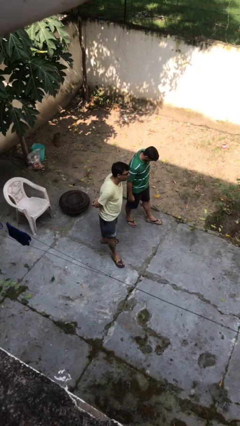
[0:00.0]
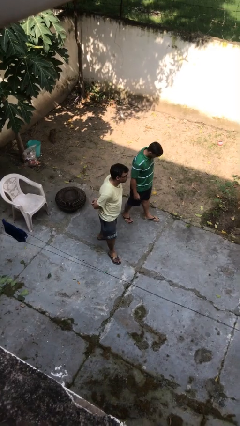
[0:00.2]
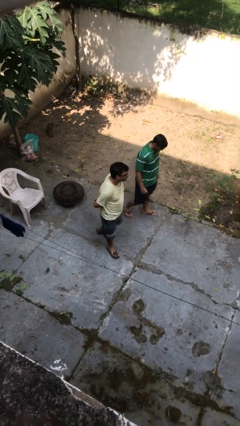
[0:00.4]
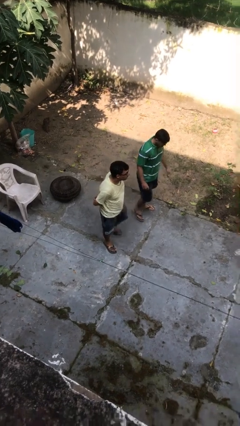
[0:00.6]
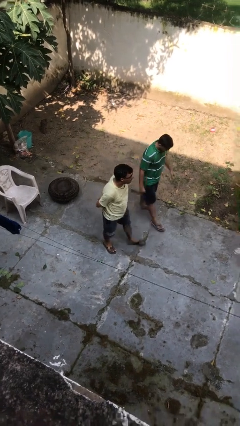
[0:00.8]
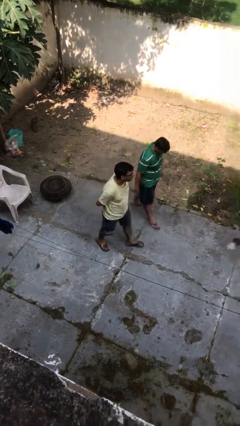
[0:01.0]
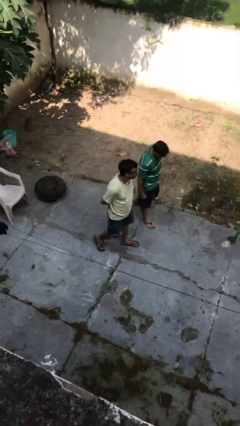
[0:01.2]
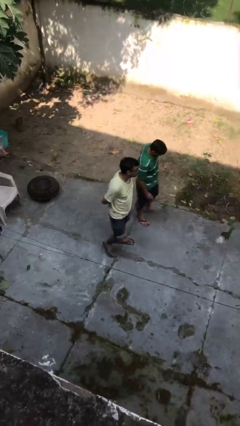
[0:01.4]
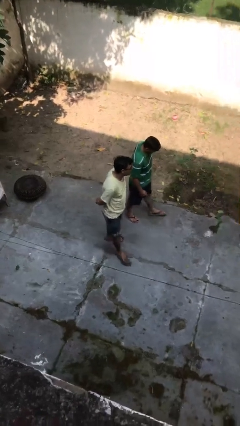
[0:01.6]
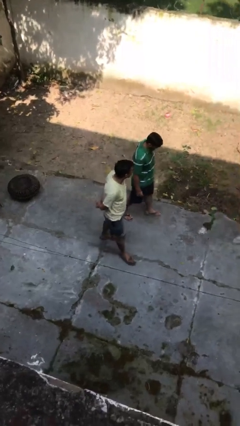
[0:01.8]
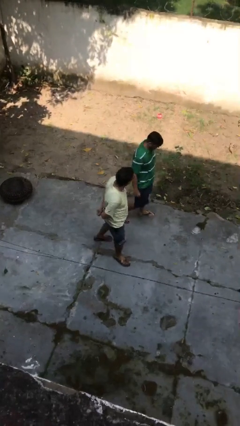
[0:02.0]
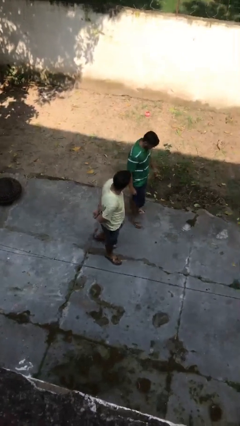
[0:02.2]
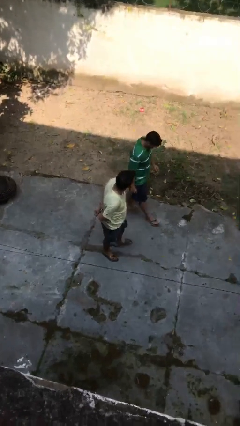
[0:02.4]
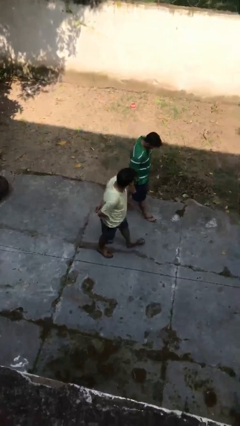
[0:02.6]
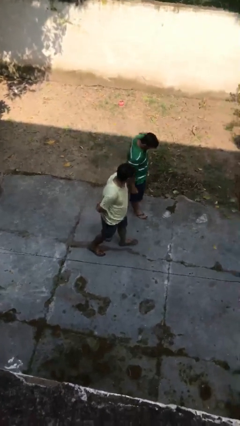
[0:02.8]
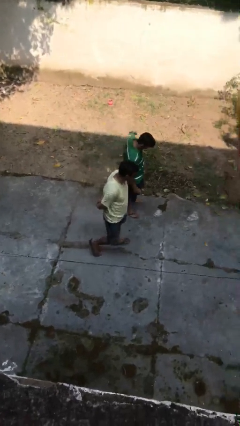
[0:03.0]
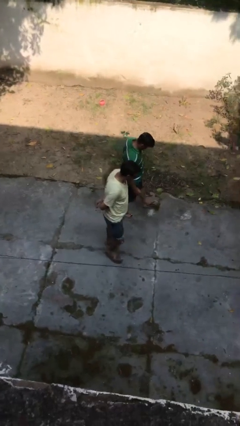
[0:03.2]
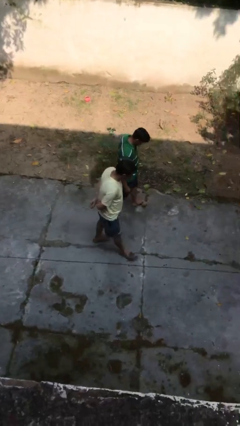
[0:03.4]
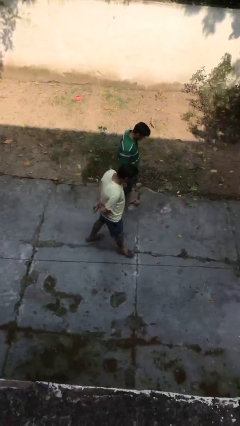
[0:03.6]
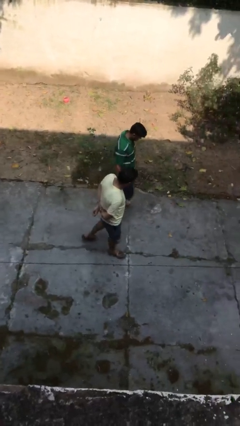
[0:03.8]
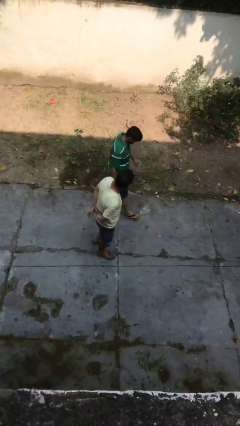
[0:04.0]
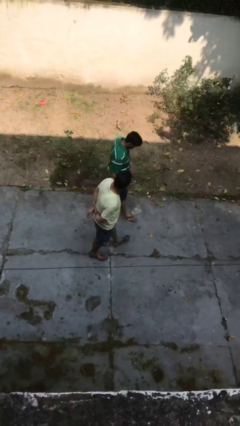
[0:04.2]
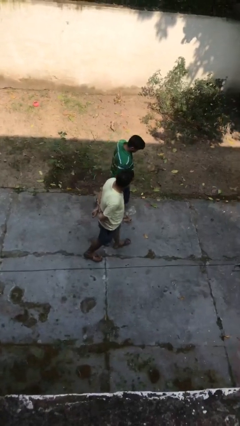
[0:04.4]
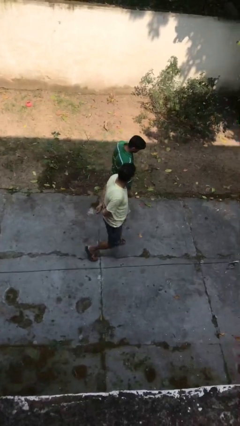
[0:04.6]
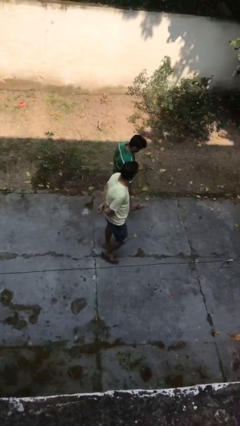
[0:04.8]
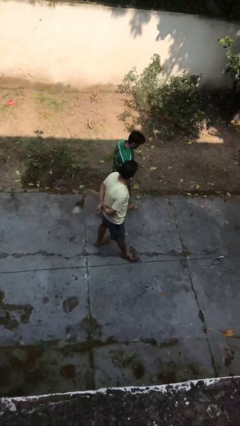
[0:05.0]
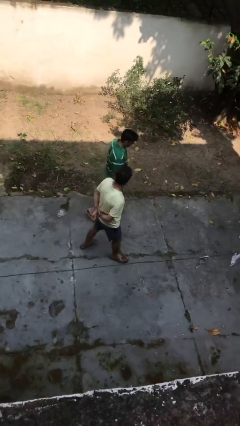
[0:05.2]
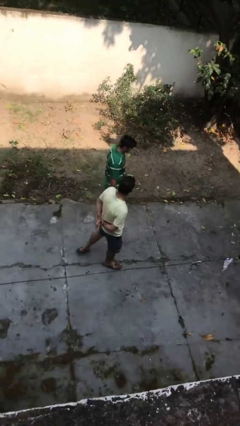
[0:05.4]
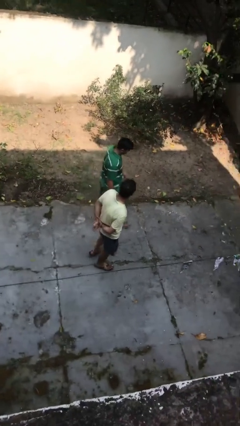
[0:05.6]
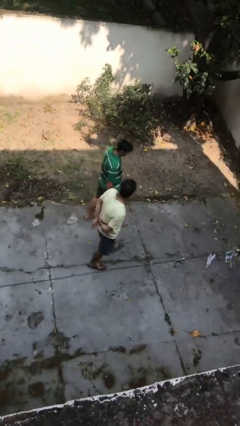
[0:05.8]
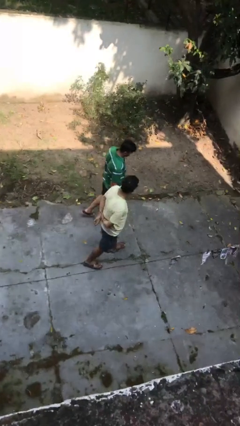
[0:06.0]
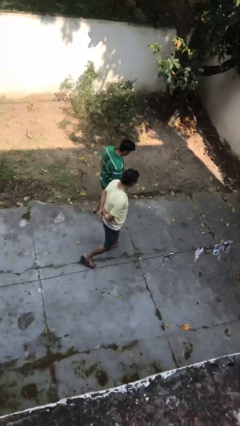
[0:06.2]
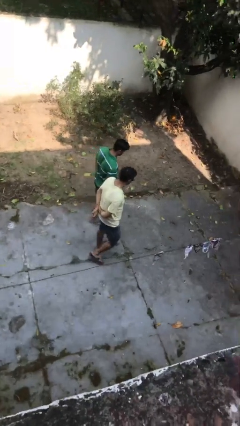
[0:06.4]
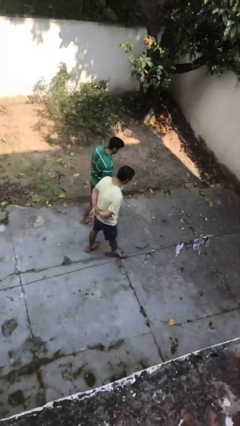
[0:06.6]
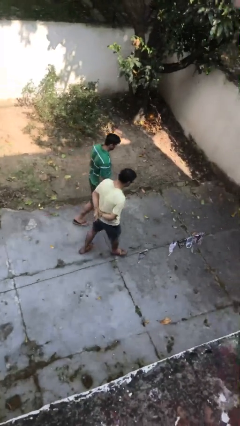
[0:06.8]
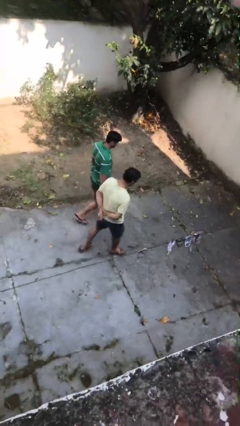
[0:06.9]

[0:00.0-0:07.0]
person talks to person

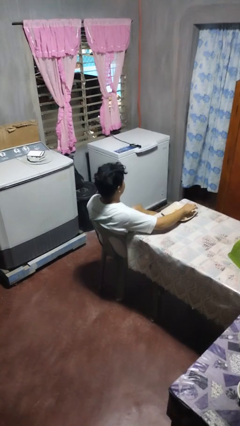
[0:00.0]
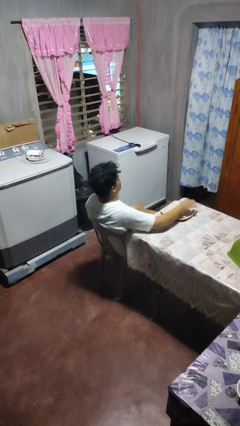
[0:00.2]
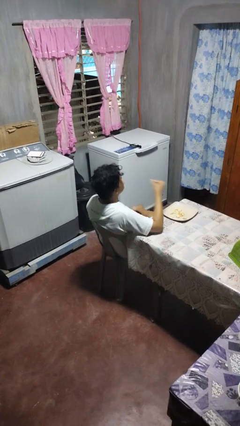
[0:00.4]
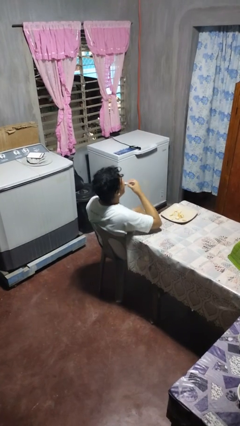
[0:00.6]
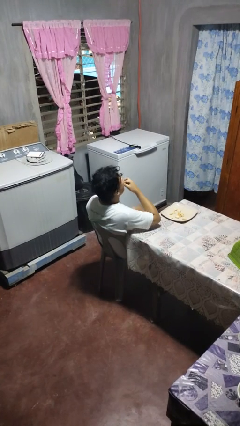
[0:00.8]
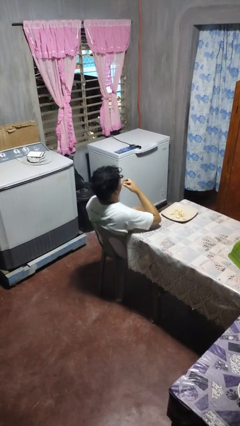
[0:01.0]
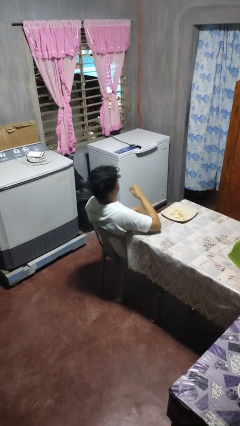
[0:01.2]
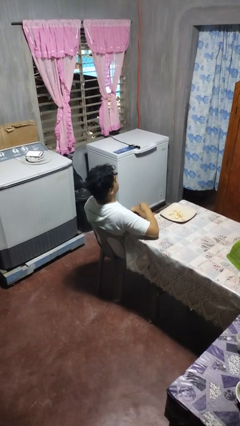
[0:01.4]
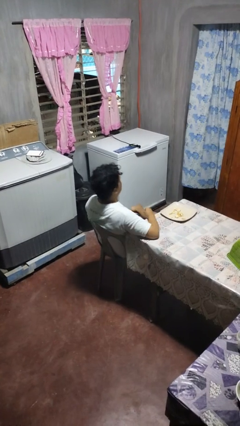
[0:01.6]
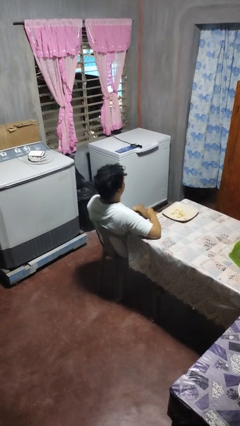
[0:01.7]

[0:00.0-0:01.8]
person eats with hands

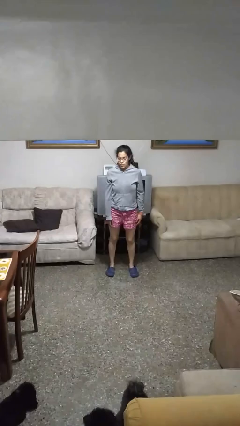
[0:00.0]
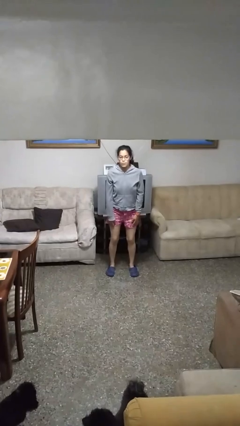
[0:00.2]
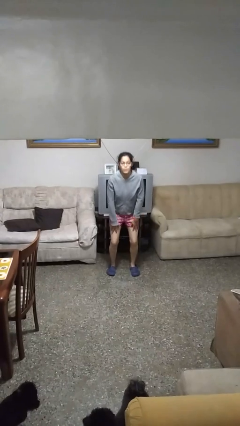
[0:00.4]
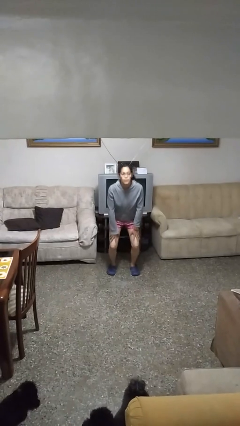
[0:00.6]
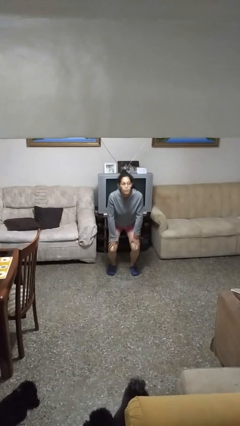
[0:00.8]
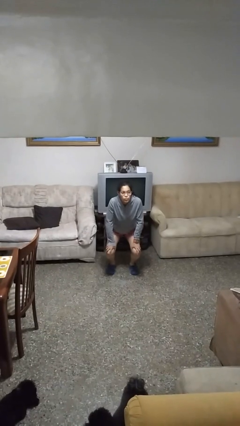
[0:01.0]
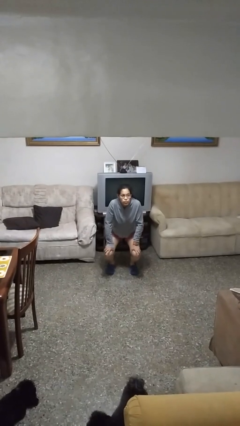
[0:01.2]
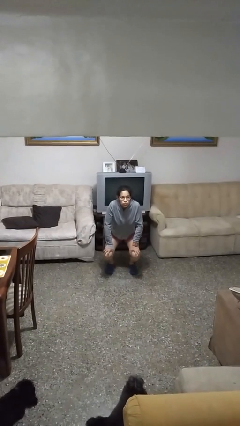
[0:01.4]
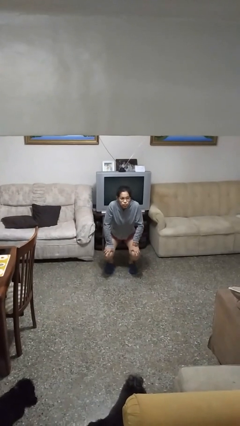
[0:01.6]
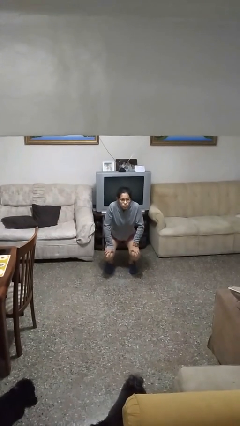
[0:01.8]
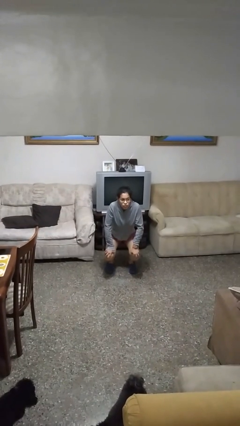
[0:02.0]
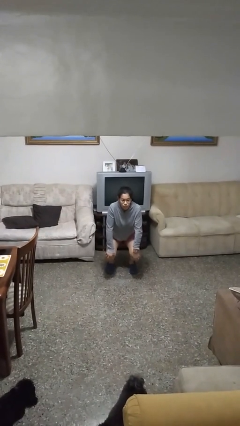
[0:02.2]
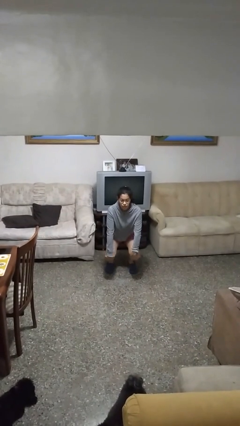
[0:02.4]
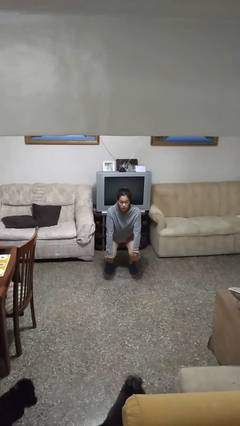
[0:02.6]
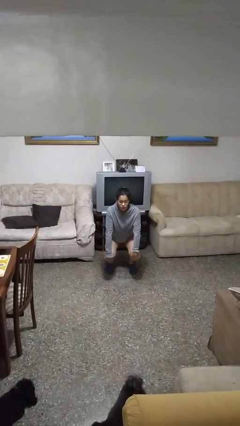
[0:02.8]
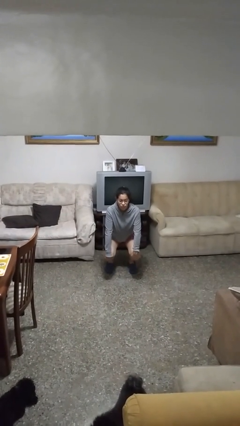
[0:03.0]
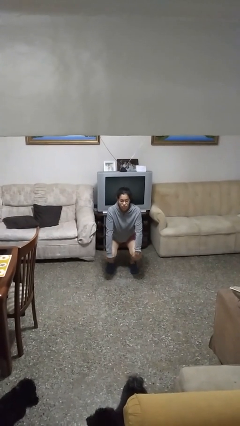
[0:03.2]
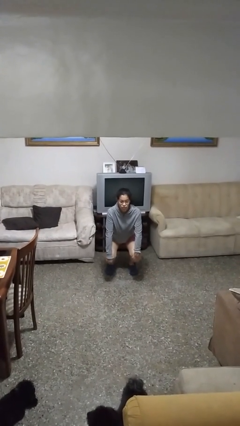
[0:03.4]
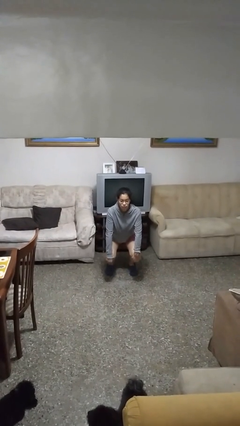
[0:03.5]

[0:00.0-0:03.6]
person squats

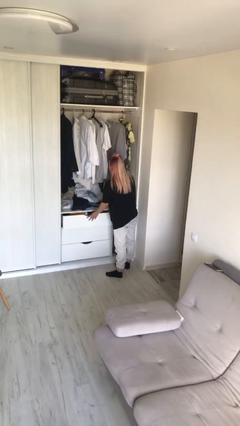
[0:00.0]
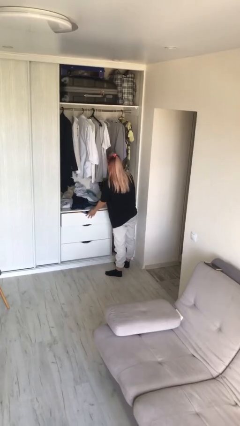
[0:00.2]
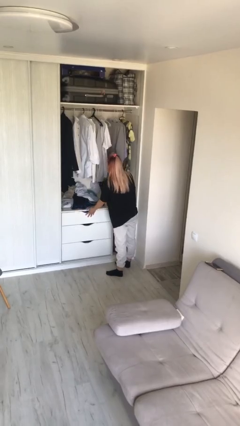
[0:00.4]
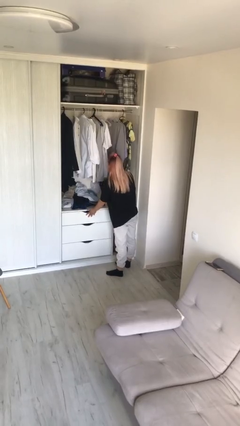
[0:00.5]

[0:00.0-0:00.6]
person closes dresser drawer

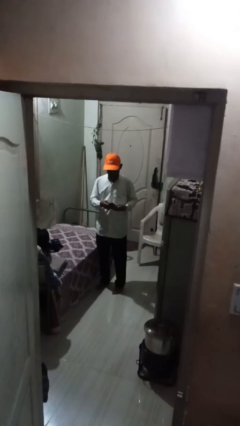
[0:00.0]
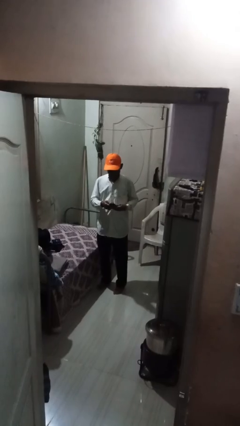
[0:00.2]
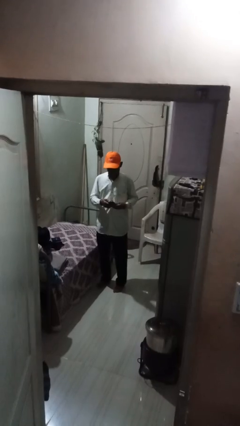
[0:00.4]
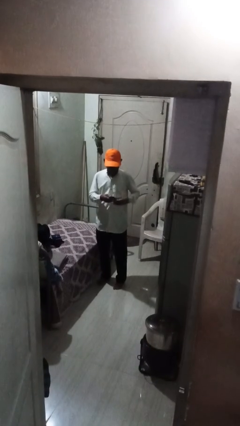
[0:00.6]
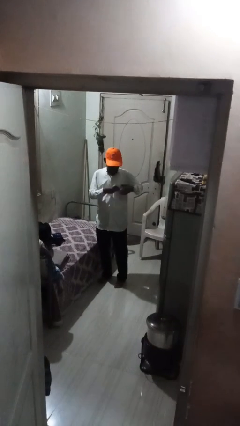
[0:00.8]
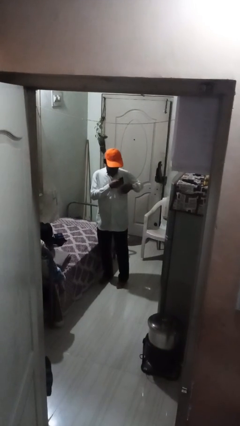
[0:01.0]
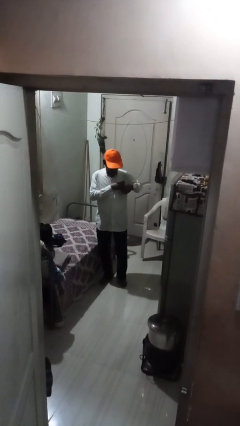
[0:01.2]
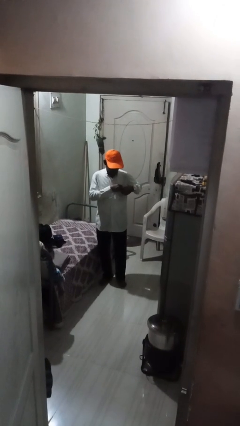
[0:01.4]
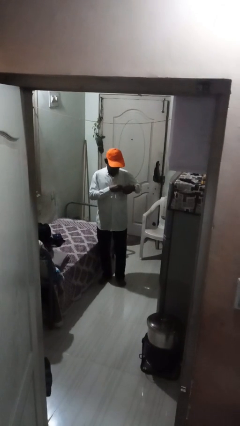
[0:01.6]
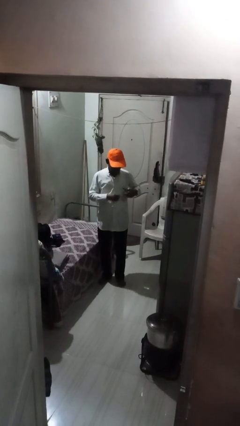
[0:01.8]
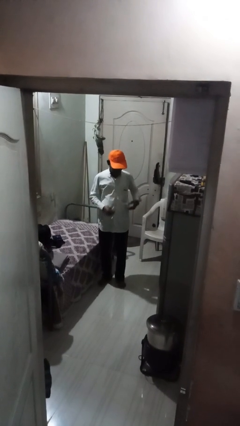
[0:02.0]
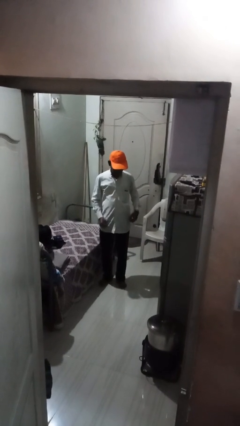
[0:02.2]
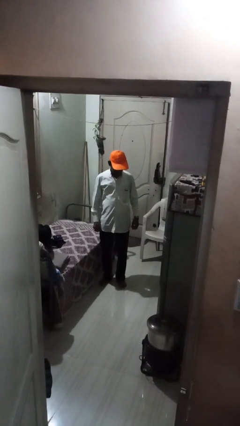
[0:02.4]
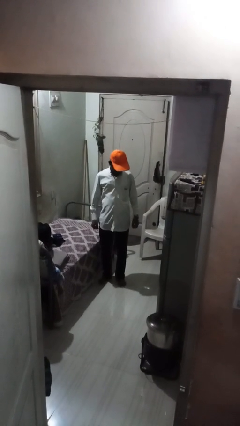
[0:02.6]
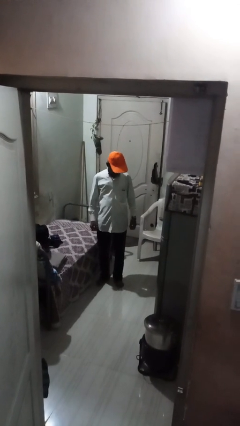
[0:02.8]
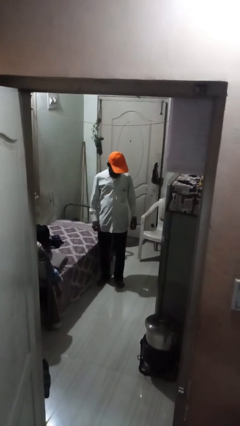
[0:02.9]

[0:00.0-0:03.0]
person puts phone into pocket

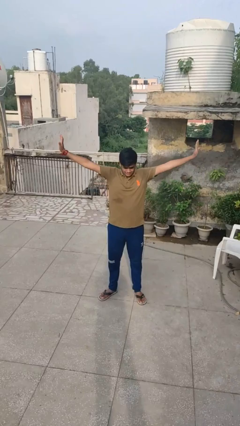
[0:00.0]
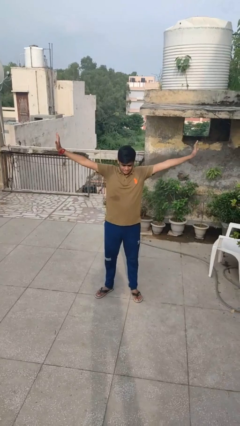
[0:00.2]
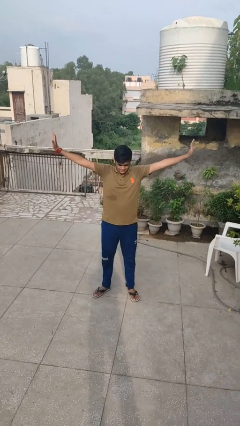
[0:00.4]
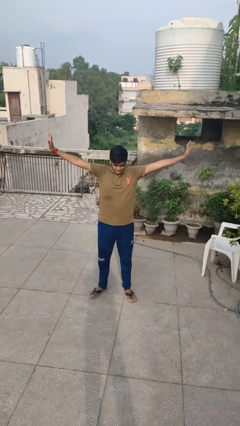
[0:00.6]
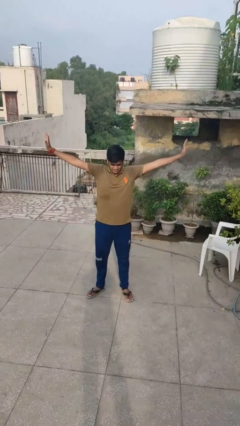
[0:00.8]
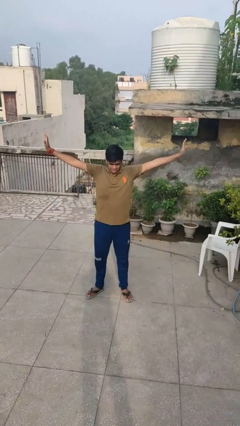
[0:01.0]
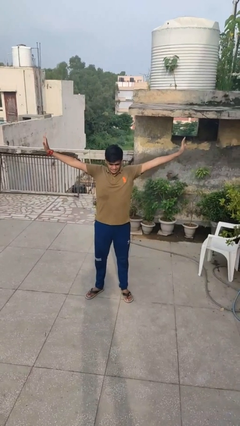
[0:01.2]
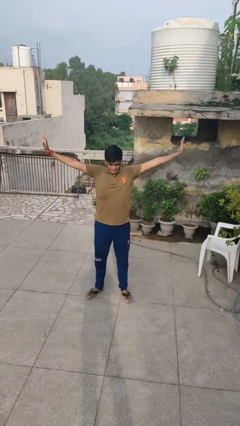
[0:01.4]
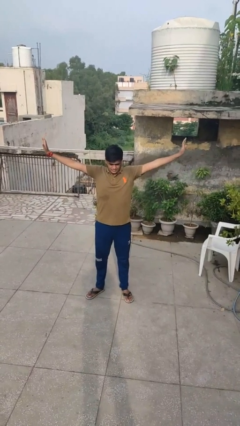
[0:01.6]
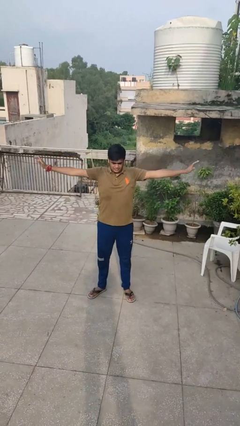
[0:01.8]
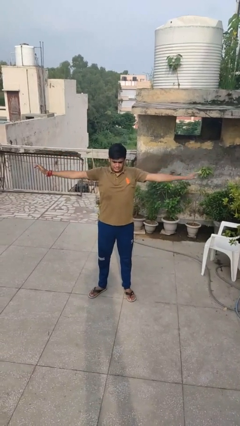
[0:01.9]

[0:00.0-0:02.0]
person stretches arms to side
